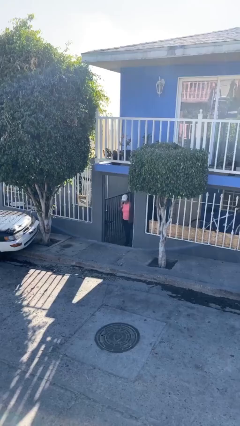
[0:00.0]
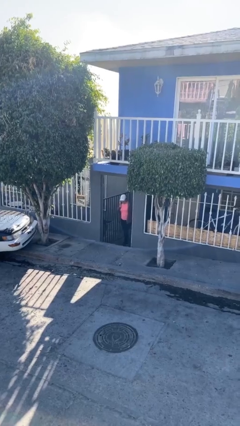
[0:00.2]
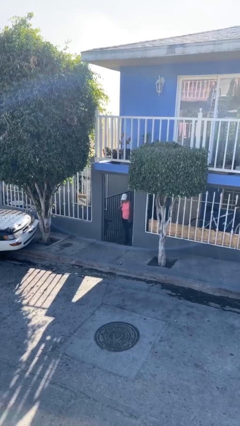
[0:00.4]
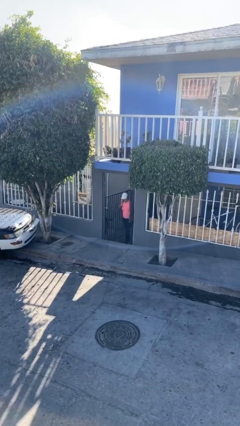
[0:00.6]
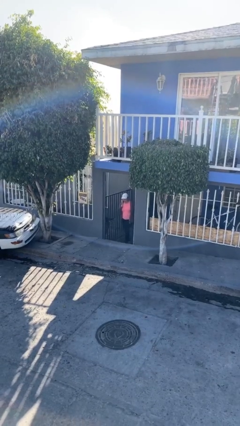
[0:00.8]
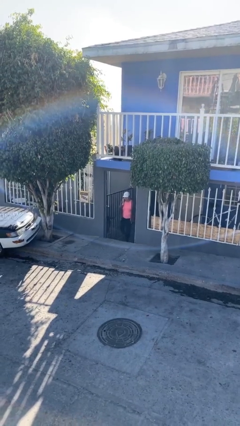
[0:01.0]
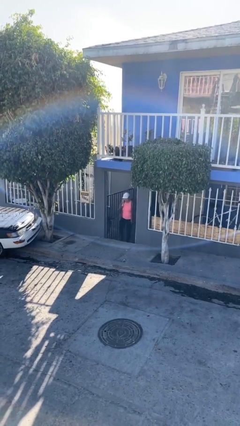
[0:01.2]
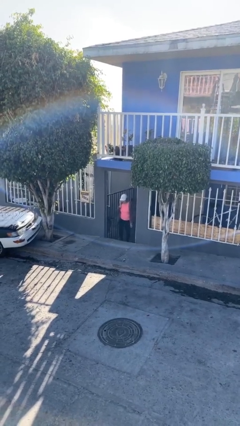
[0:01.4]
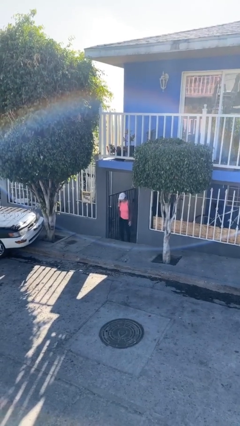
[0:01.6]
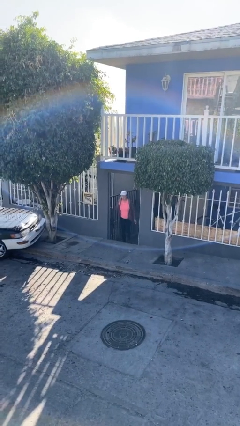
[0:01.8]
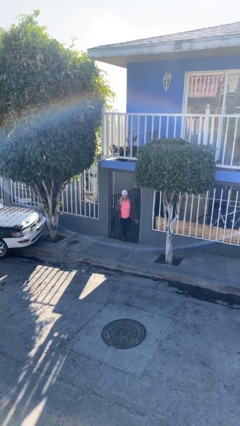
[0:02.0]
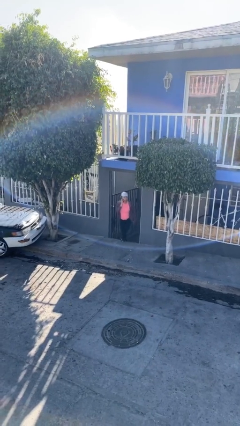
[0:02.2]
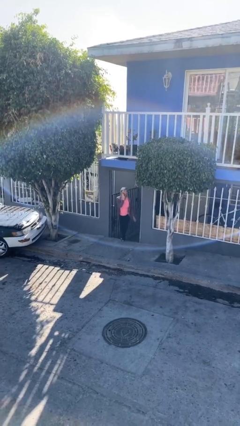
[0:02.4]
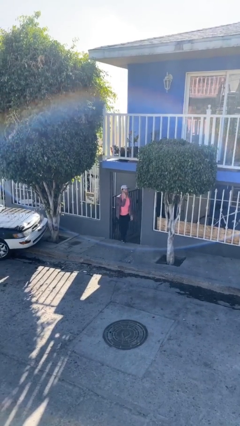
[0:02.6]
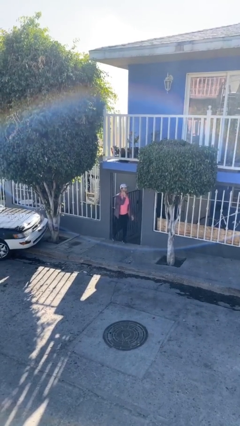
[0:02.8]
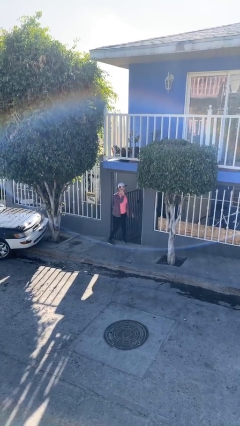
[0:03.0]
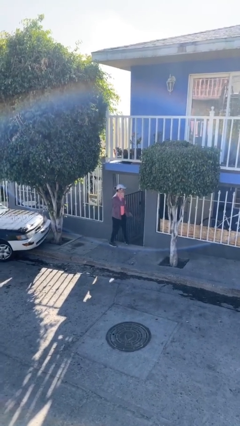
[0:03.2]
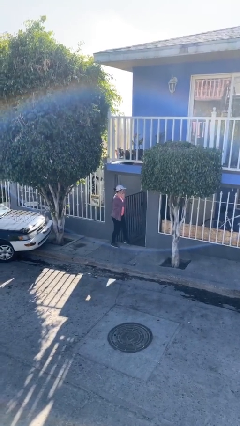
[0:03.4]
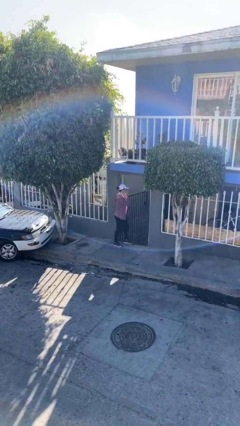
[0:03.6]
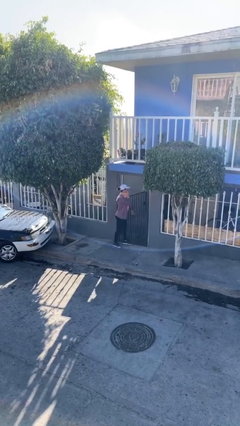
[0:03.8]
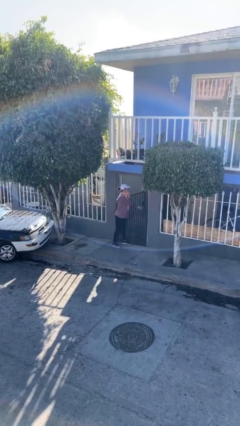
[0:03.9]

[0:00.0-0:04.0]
person enters scene through structure

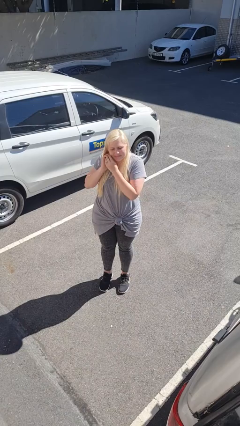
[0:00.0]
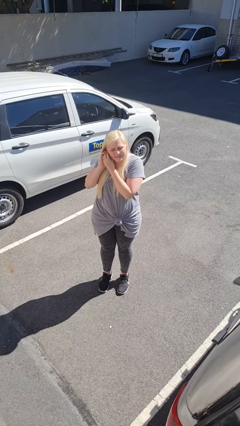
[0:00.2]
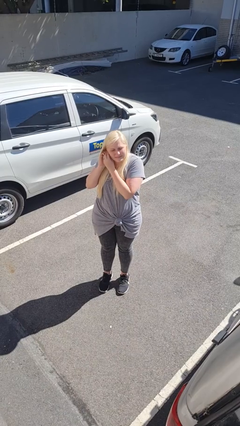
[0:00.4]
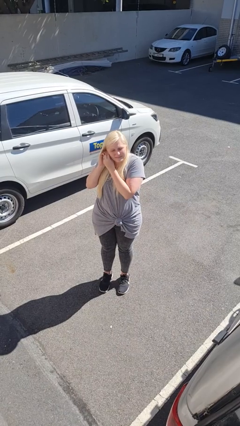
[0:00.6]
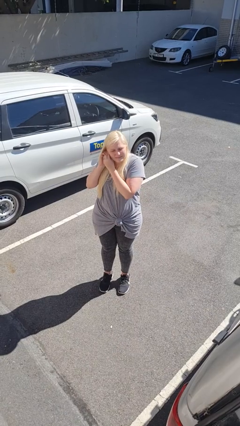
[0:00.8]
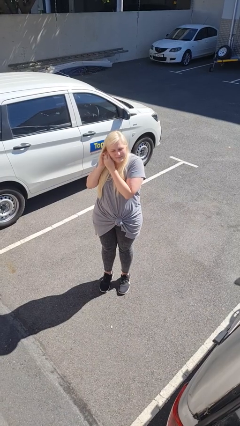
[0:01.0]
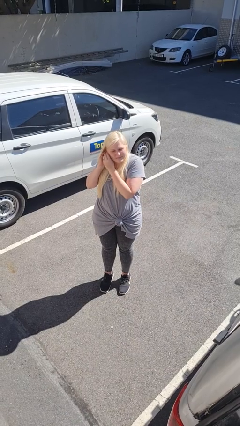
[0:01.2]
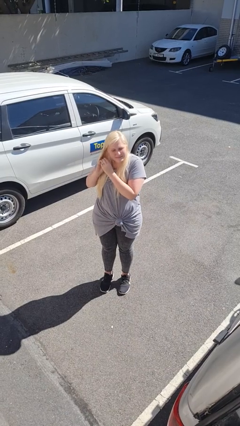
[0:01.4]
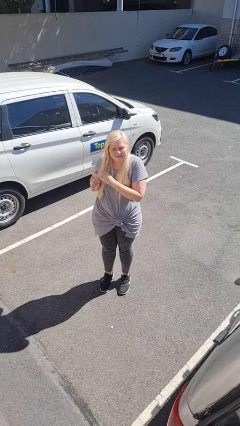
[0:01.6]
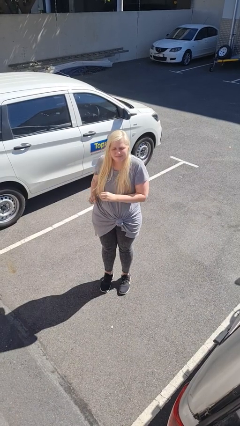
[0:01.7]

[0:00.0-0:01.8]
person takes off earrings

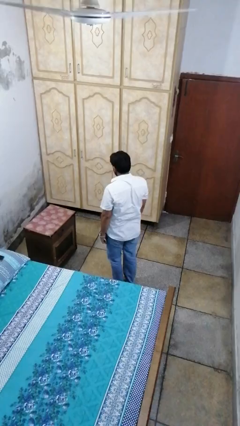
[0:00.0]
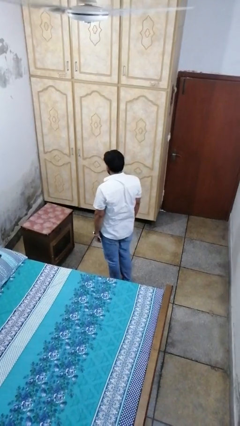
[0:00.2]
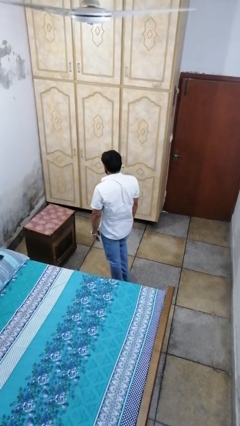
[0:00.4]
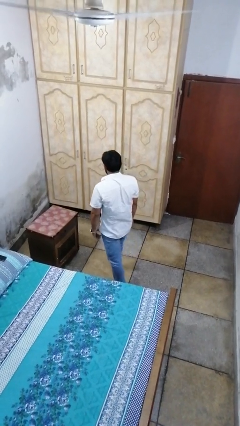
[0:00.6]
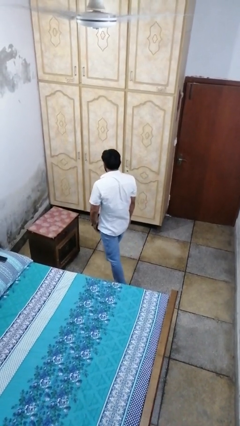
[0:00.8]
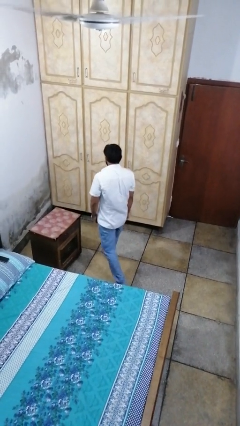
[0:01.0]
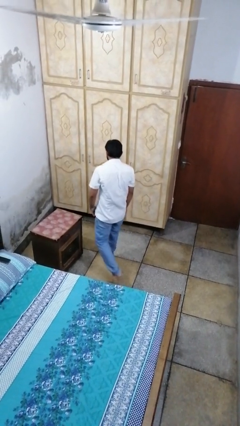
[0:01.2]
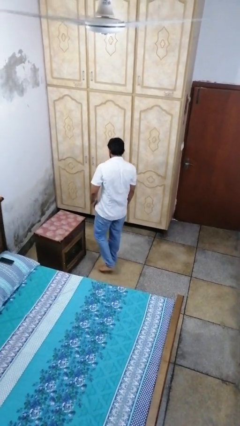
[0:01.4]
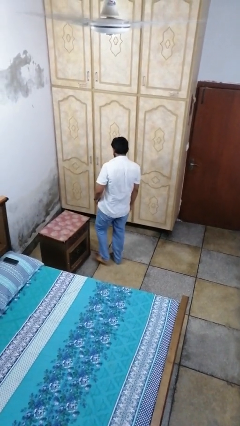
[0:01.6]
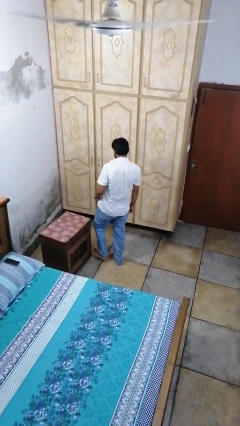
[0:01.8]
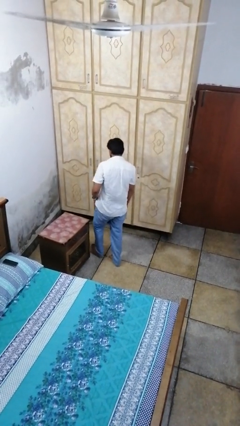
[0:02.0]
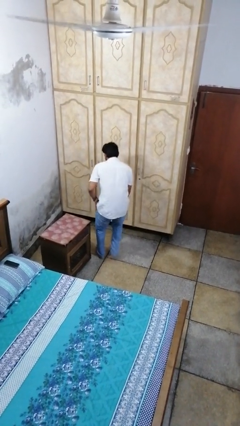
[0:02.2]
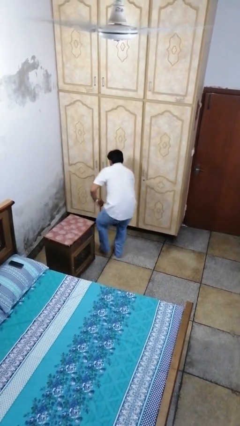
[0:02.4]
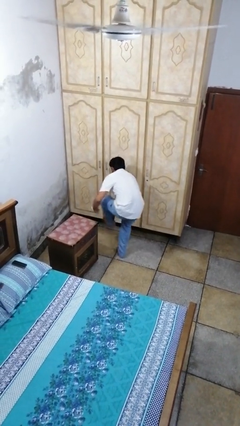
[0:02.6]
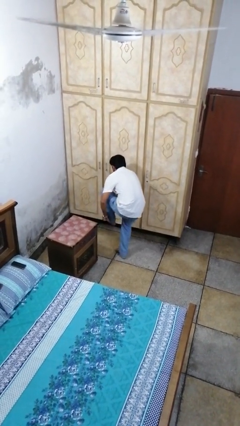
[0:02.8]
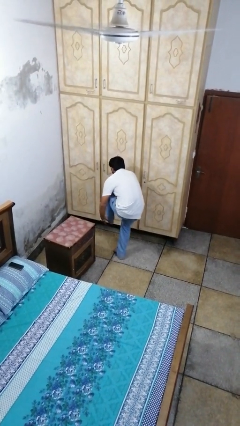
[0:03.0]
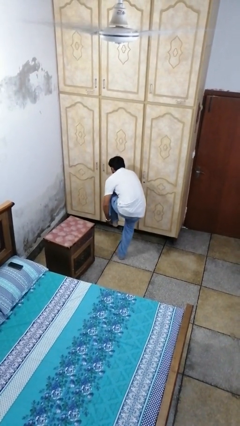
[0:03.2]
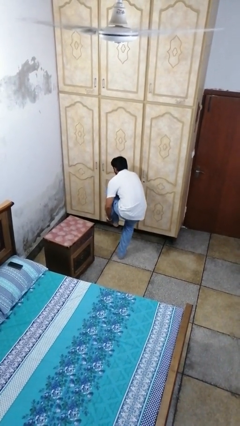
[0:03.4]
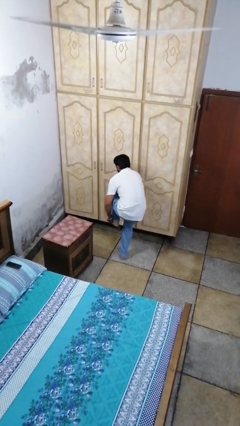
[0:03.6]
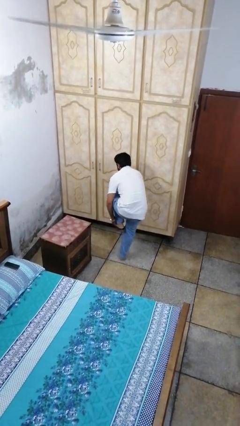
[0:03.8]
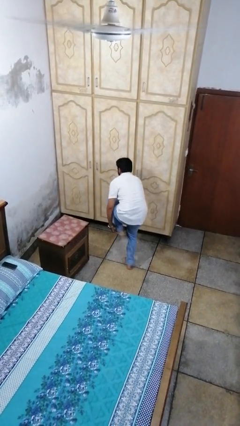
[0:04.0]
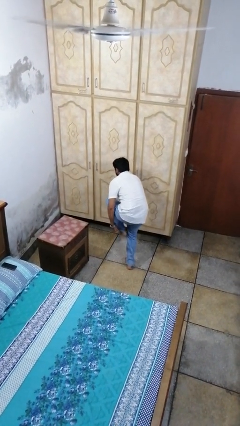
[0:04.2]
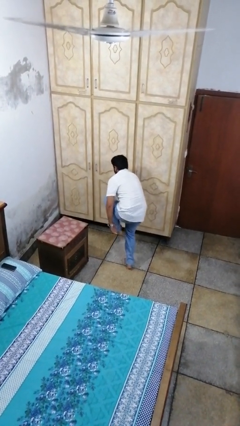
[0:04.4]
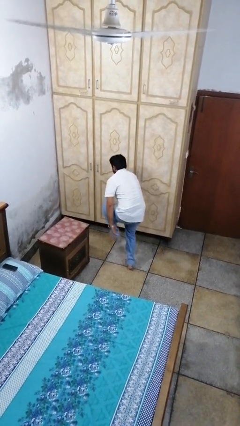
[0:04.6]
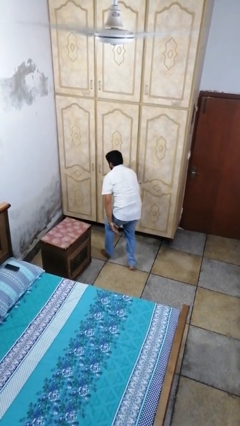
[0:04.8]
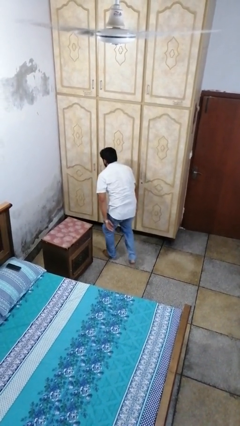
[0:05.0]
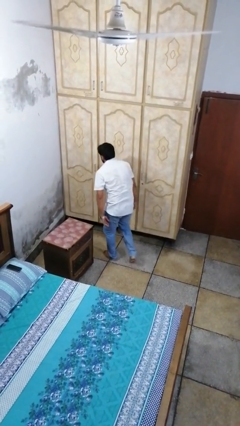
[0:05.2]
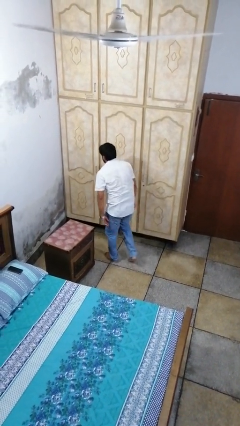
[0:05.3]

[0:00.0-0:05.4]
person stubs toe

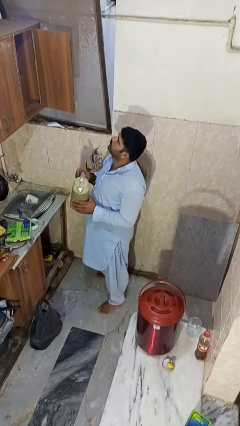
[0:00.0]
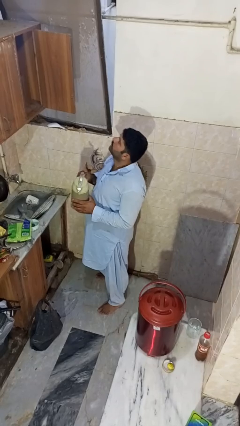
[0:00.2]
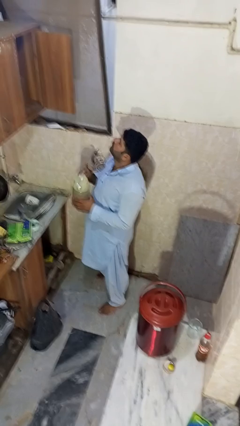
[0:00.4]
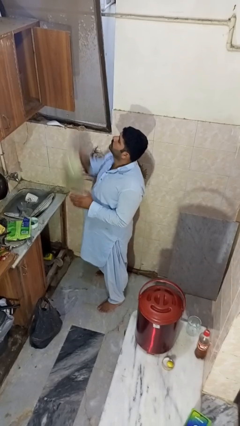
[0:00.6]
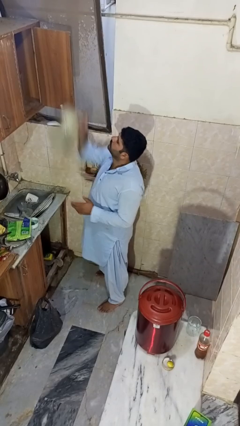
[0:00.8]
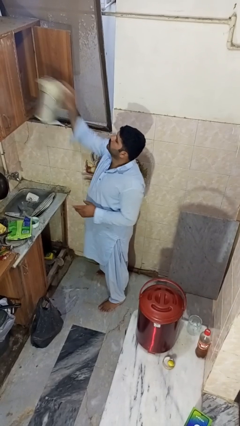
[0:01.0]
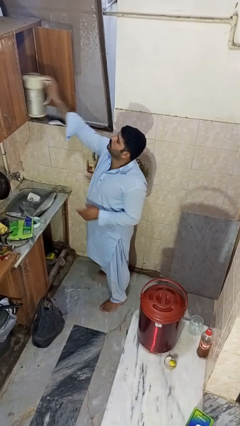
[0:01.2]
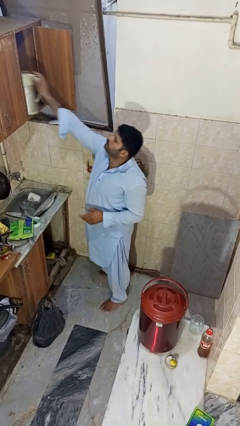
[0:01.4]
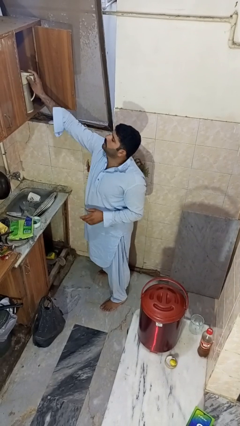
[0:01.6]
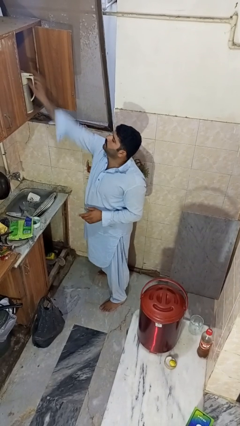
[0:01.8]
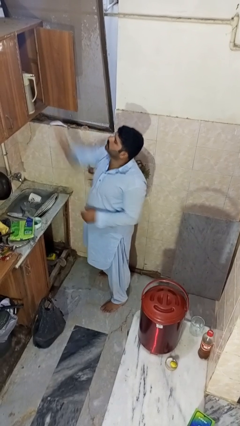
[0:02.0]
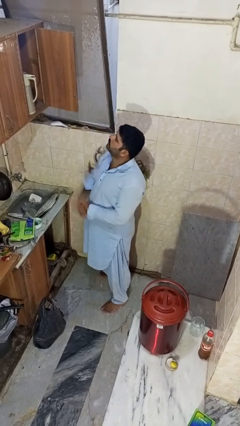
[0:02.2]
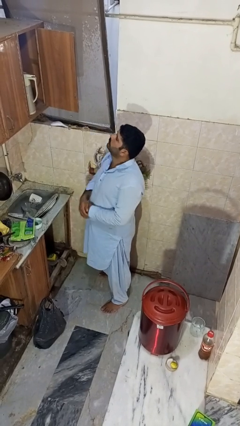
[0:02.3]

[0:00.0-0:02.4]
person puts object in cabinet

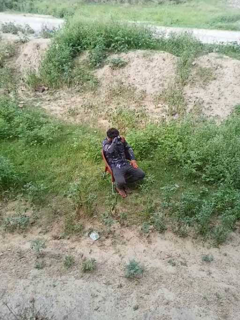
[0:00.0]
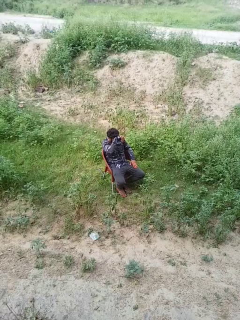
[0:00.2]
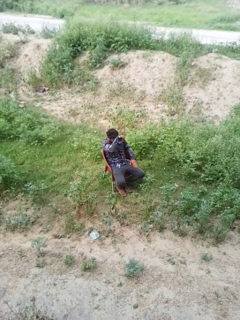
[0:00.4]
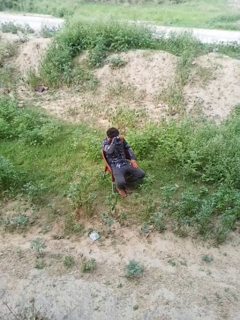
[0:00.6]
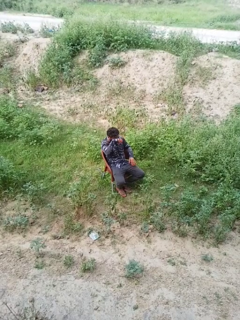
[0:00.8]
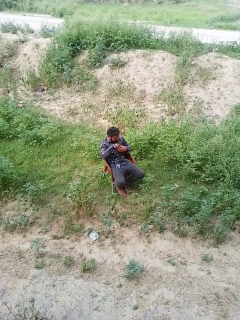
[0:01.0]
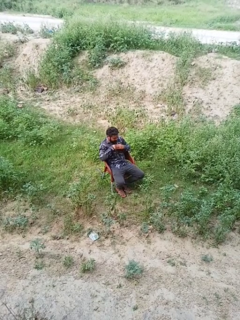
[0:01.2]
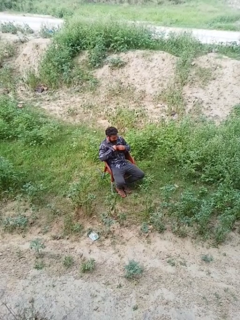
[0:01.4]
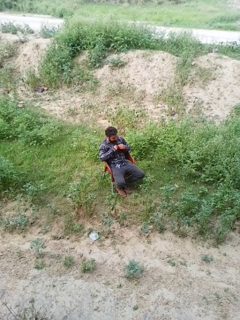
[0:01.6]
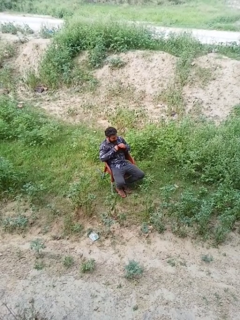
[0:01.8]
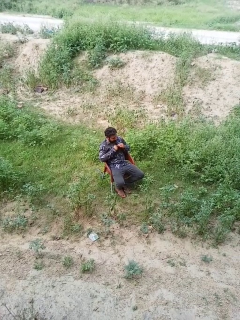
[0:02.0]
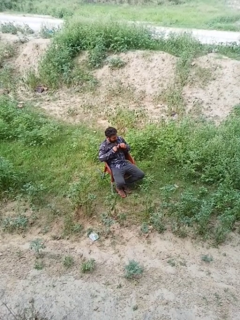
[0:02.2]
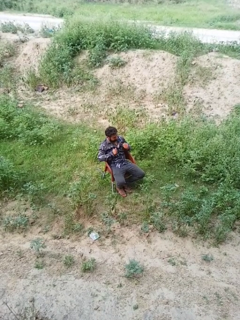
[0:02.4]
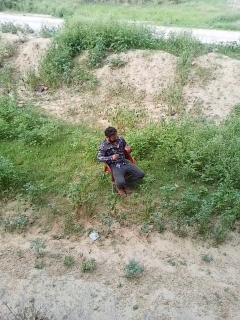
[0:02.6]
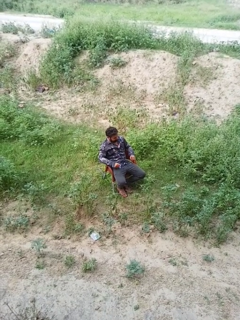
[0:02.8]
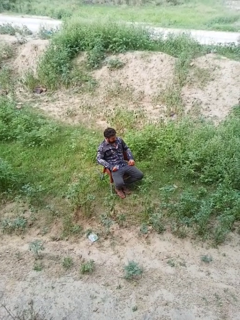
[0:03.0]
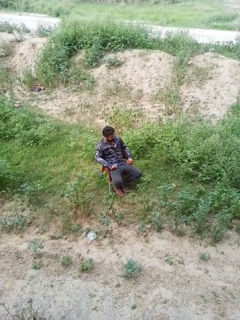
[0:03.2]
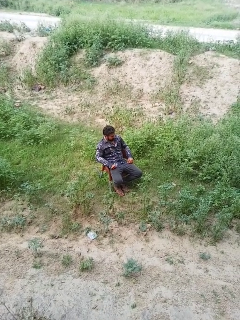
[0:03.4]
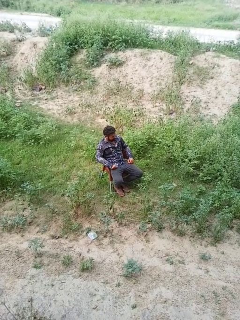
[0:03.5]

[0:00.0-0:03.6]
person unbuttons shirt

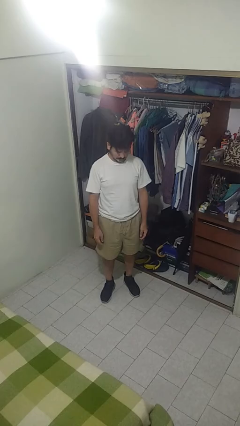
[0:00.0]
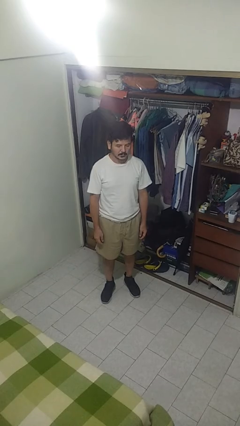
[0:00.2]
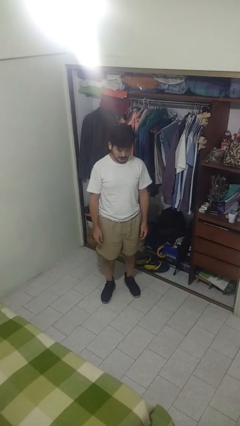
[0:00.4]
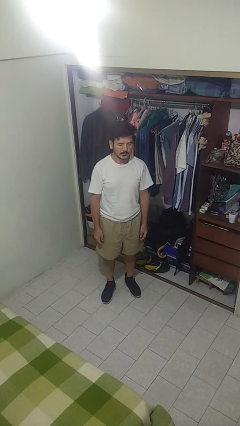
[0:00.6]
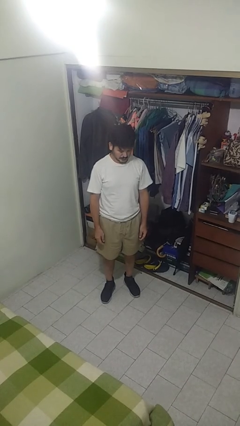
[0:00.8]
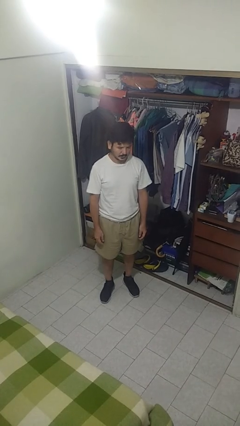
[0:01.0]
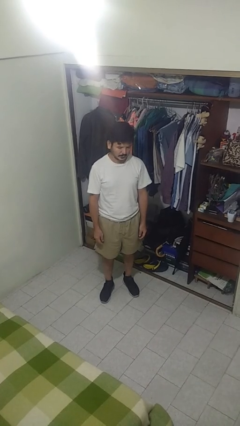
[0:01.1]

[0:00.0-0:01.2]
person nods head
